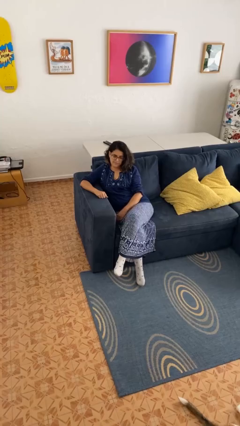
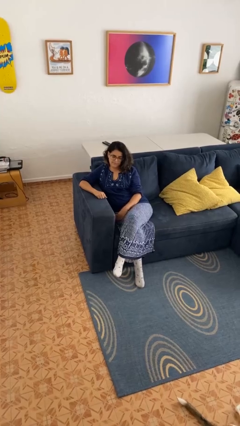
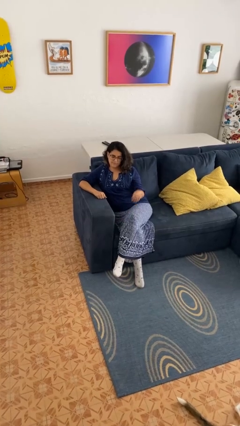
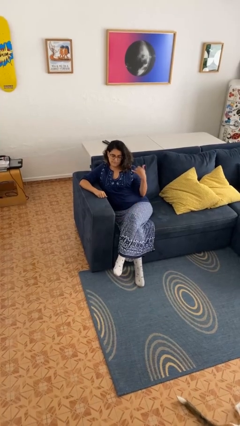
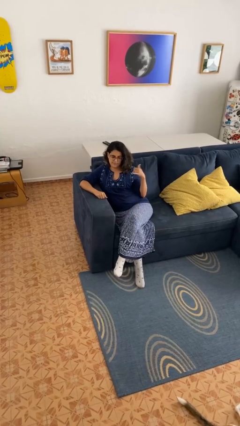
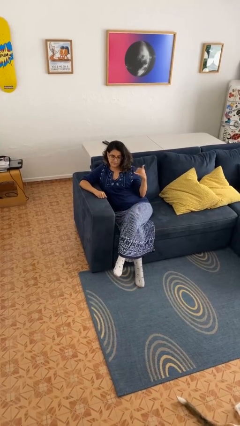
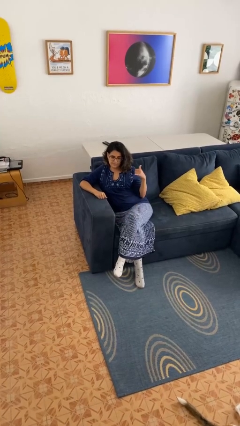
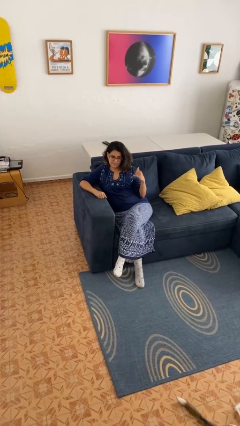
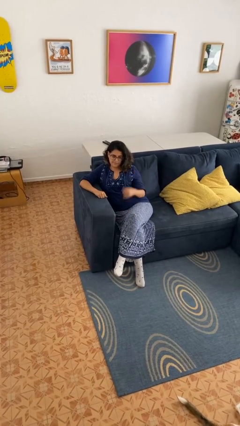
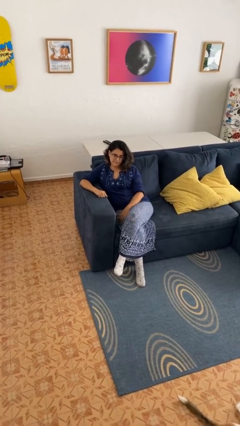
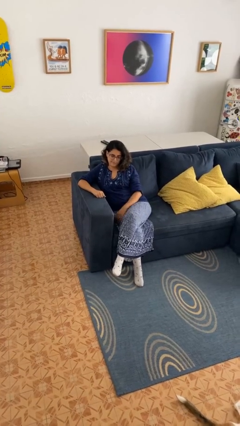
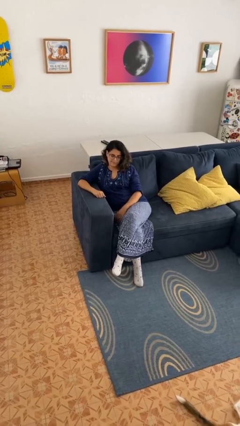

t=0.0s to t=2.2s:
person gestures hang loose

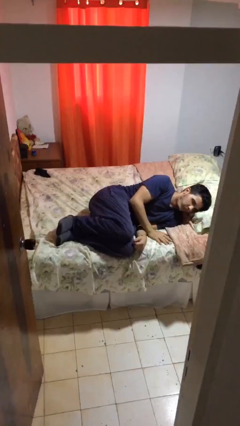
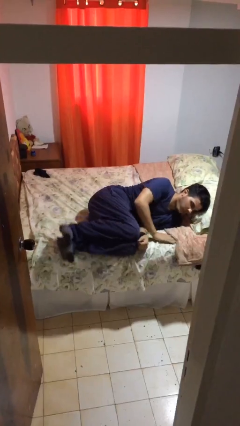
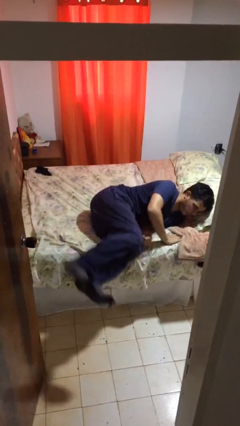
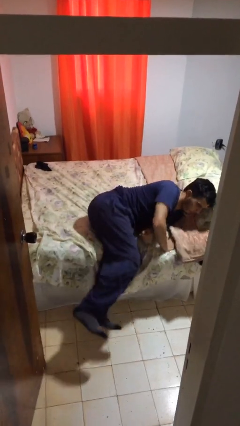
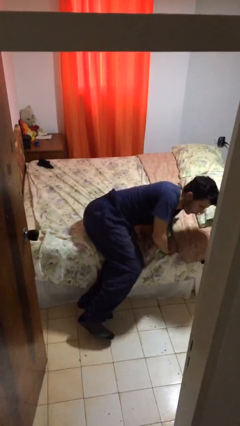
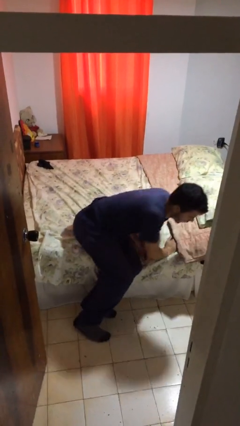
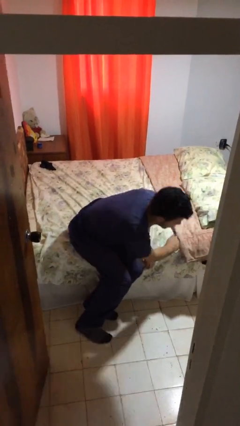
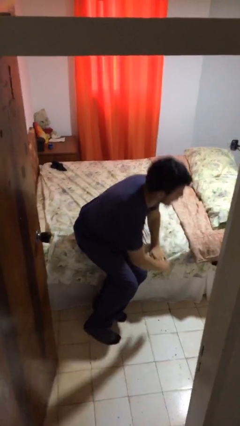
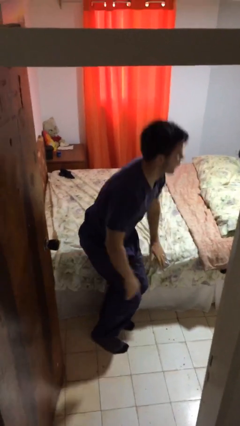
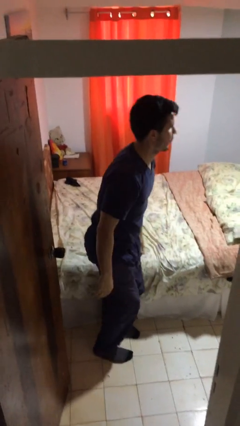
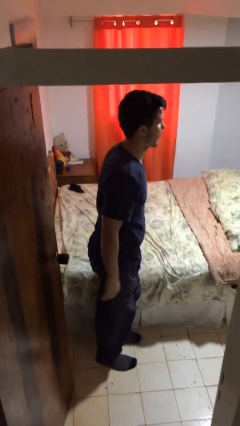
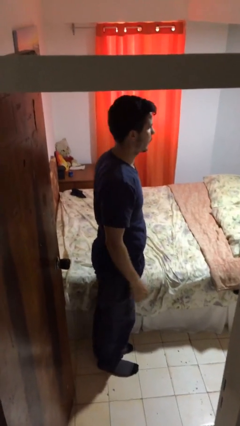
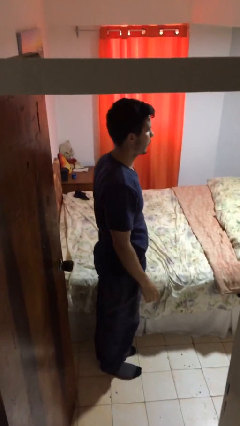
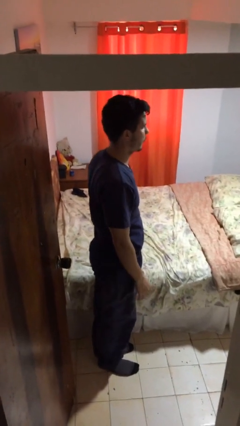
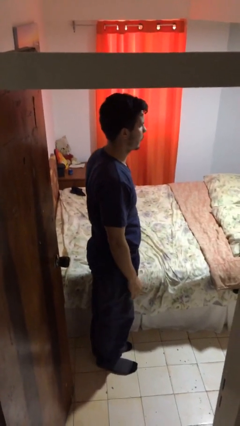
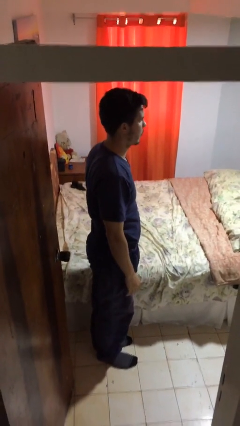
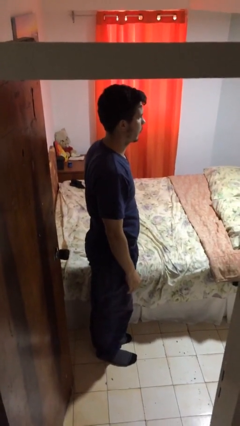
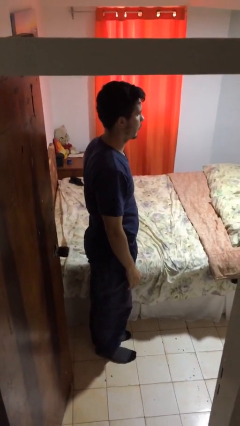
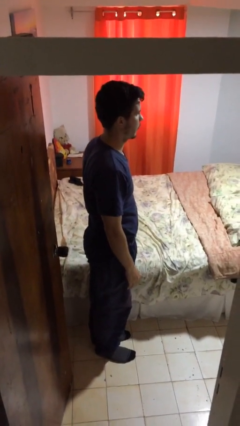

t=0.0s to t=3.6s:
person stands up

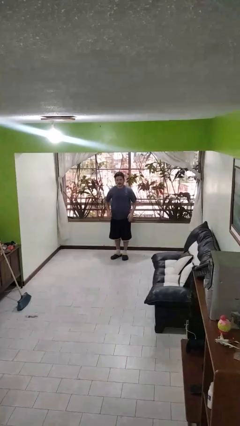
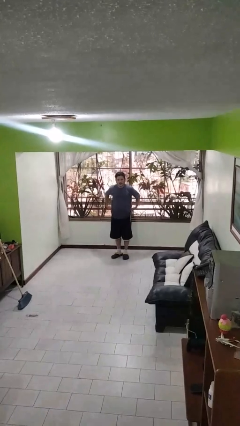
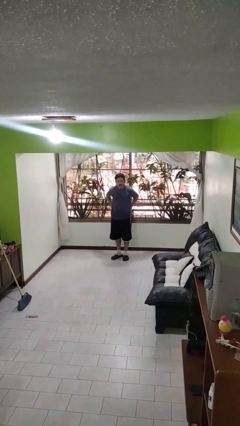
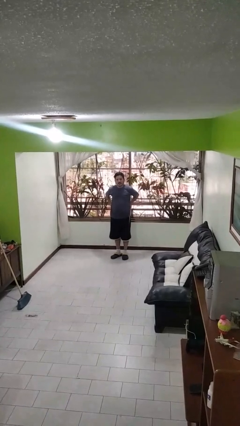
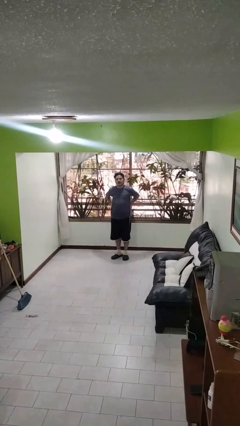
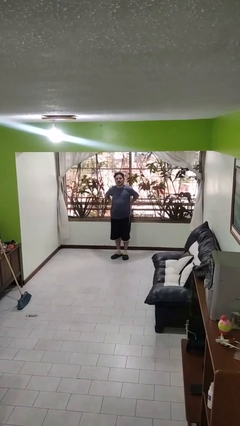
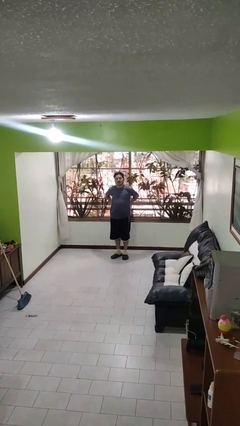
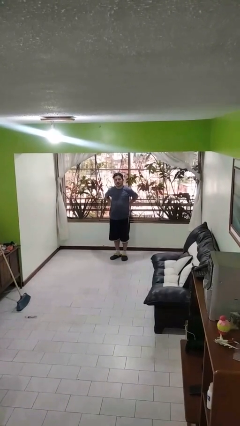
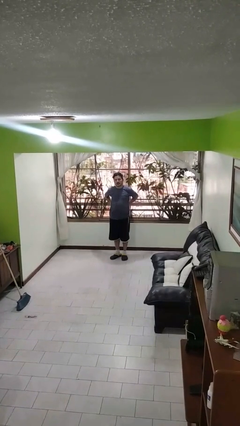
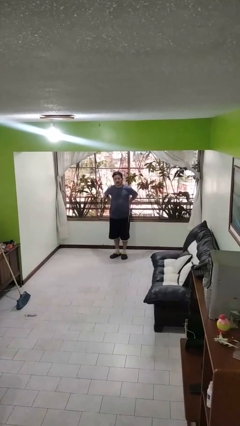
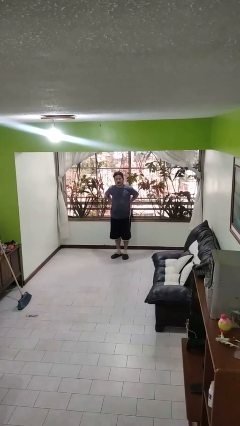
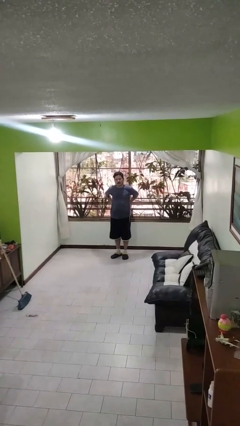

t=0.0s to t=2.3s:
person stretches back

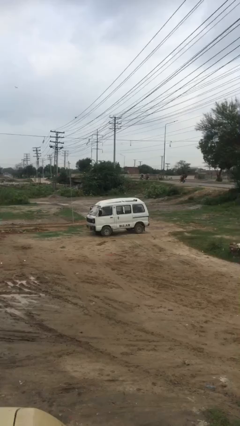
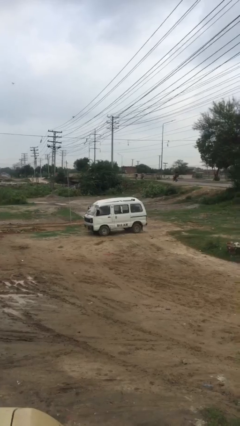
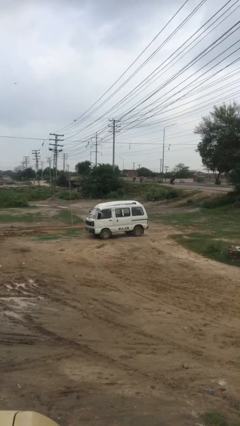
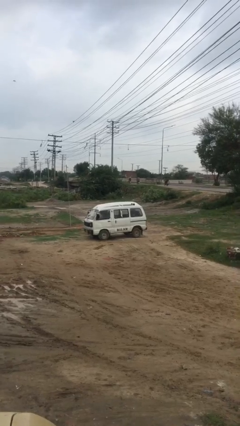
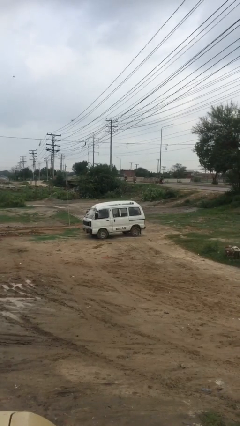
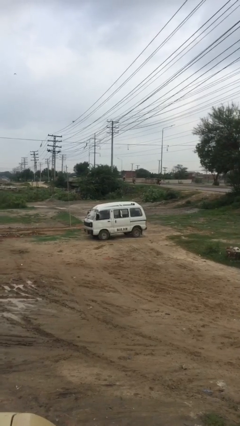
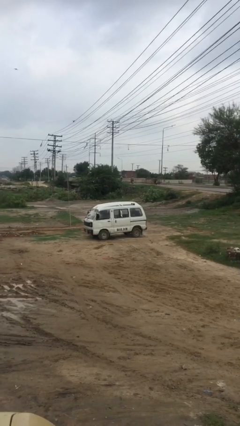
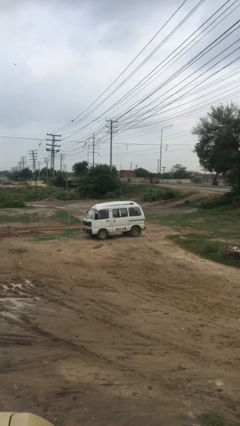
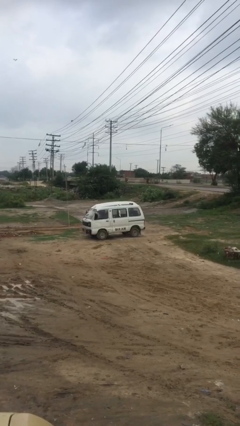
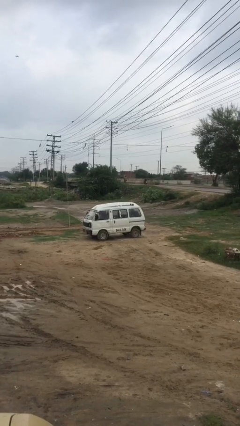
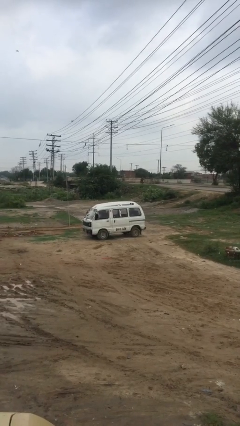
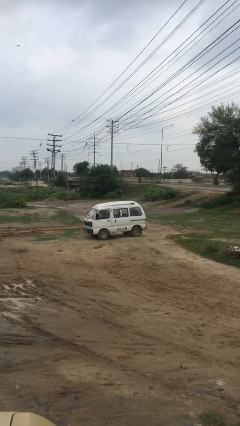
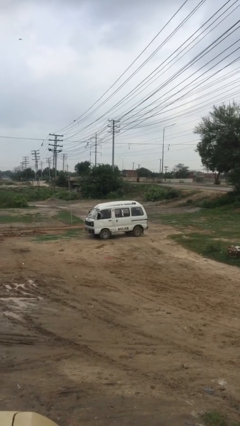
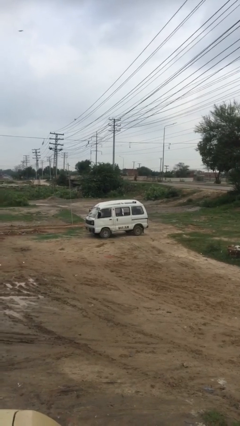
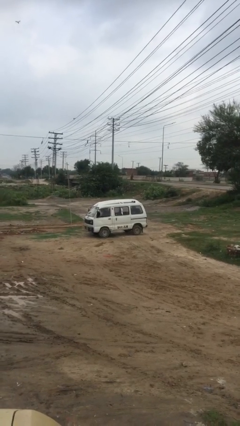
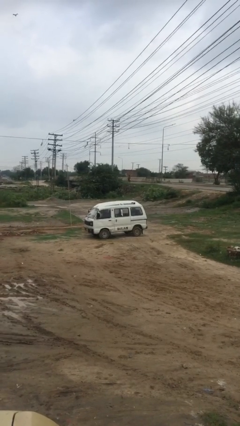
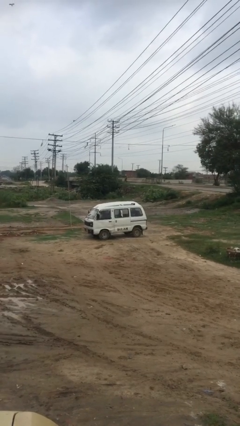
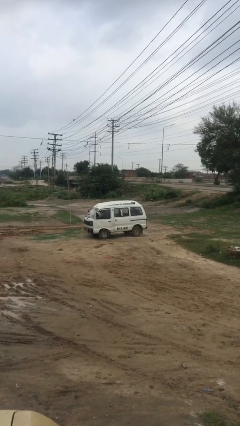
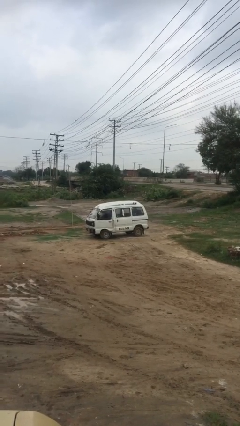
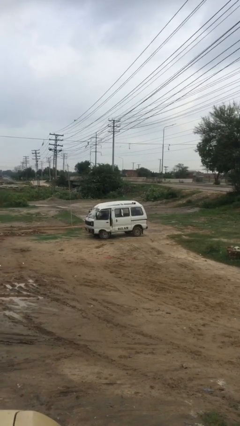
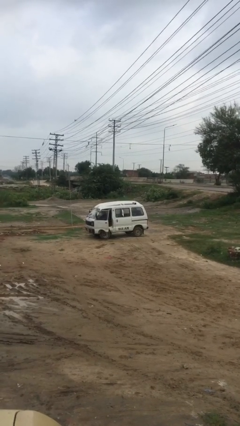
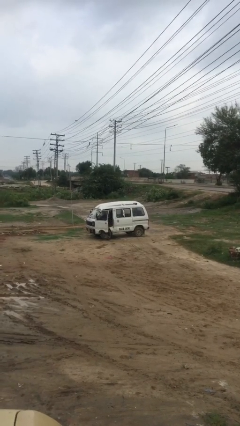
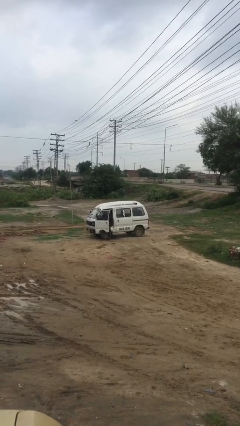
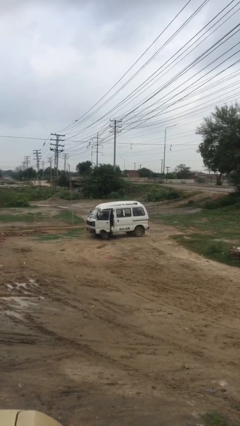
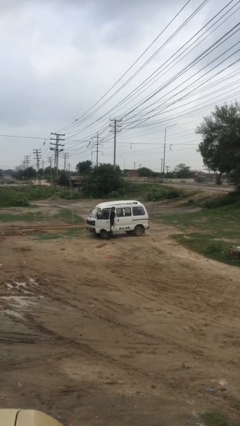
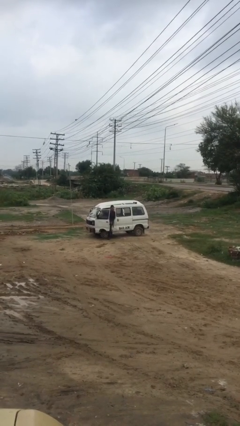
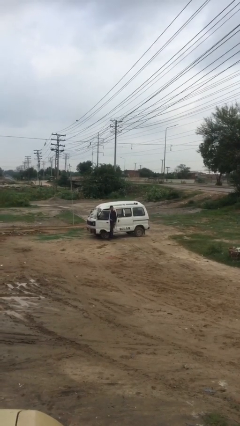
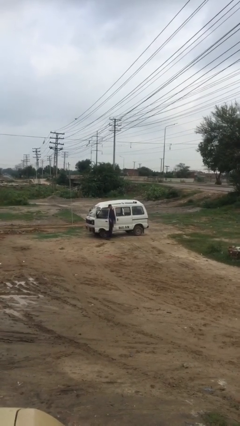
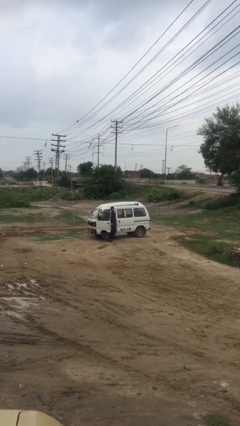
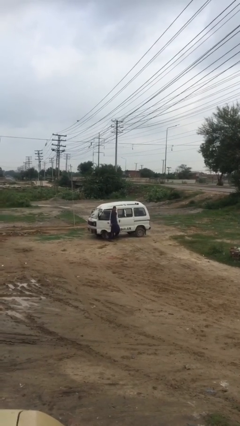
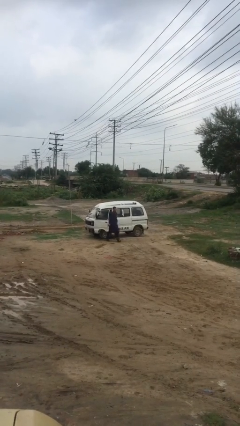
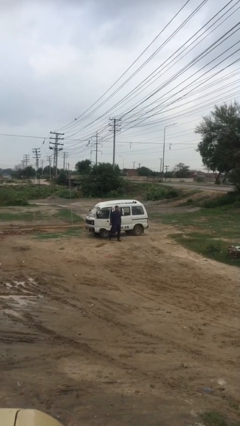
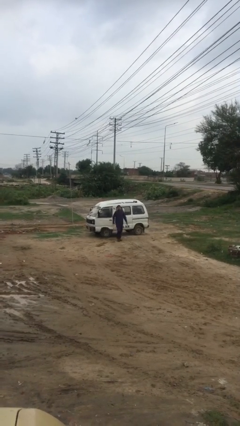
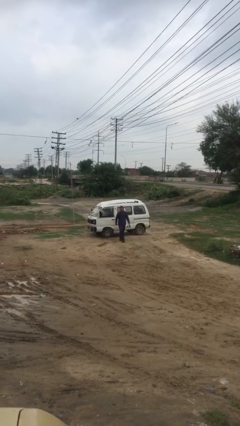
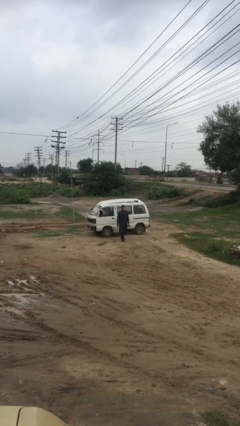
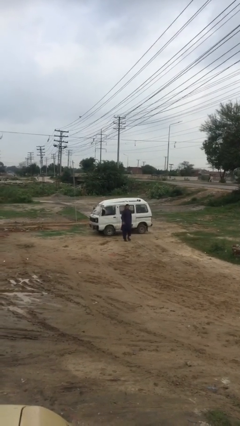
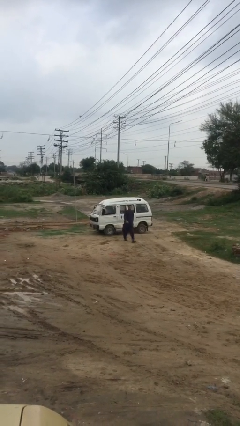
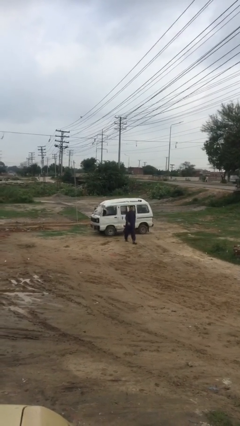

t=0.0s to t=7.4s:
car drops off person

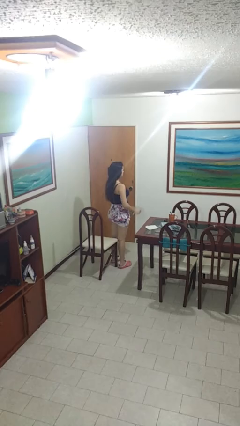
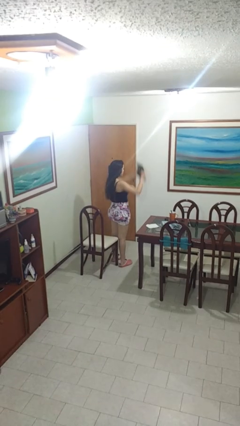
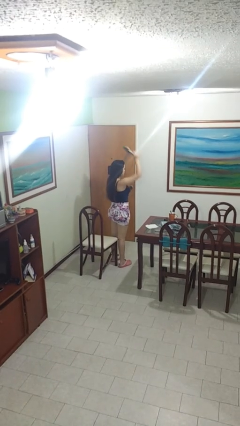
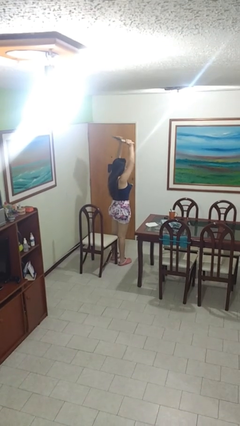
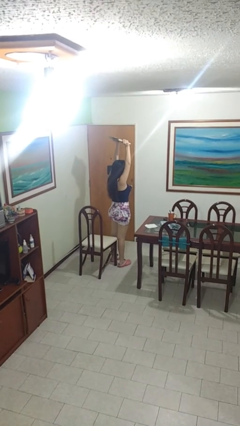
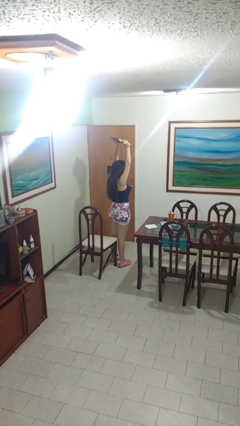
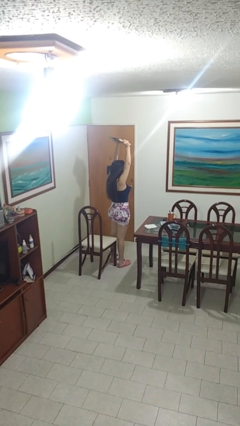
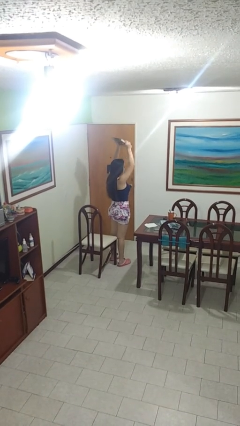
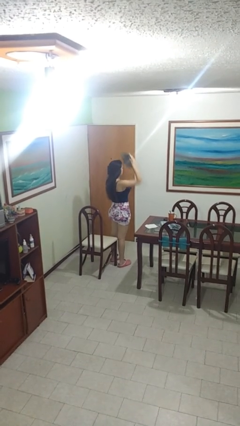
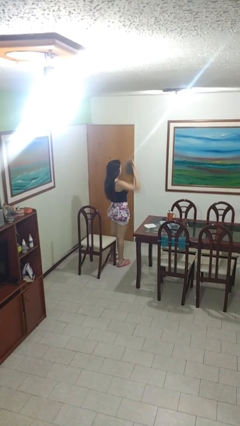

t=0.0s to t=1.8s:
person holds object above head

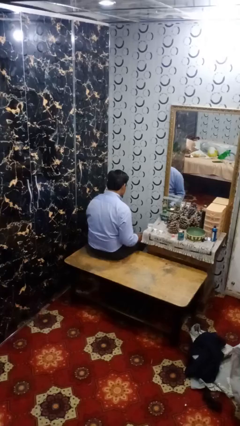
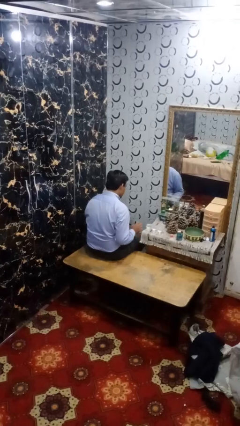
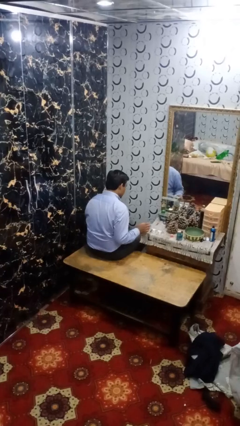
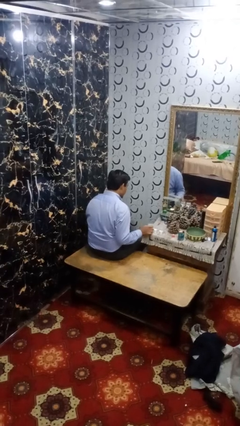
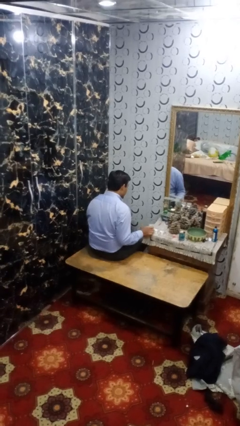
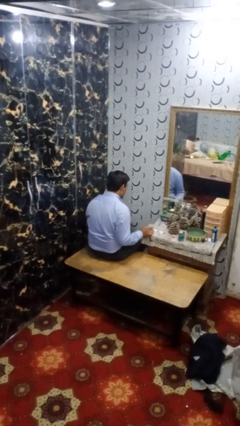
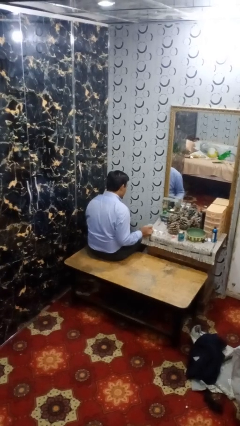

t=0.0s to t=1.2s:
person picks up object from table
